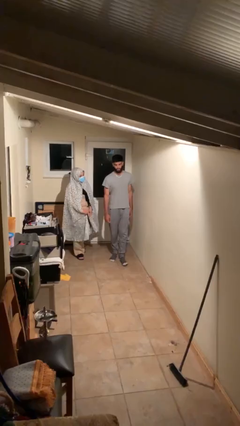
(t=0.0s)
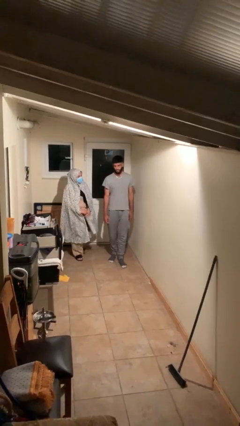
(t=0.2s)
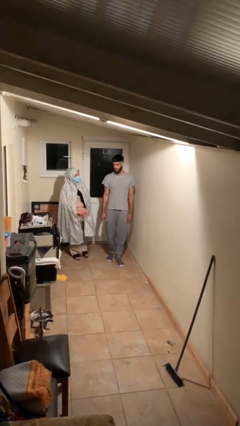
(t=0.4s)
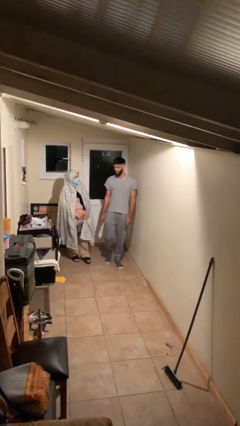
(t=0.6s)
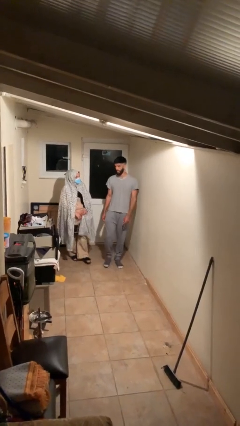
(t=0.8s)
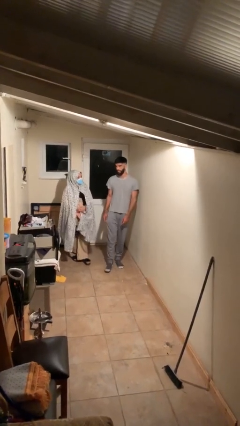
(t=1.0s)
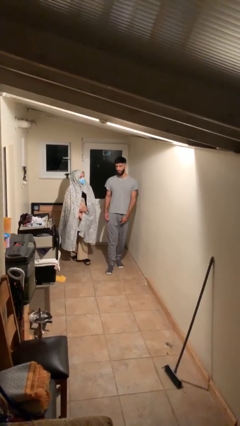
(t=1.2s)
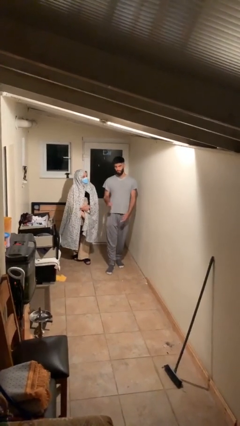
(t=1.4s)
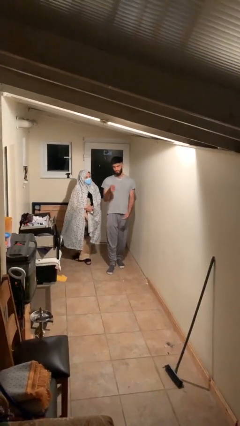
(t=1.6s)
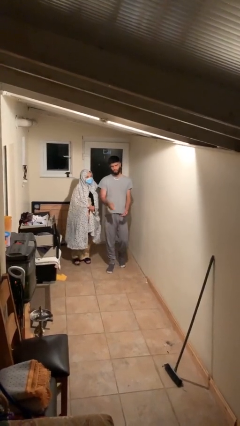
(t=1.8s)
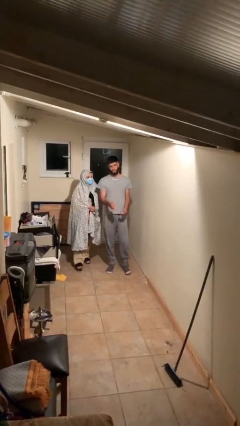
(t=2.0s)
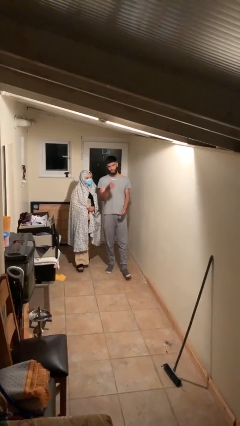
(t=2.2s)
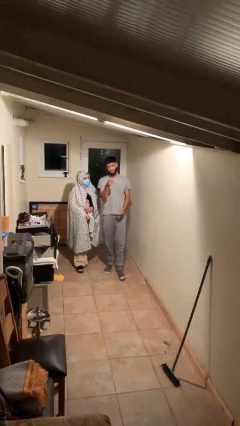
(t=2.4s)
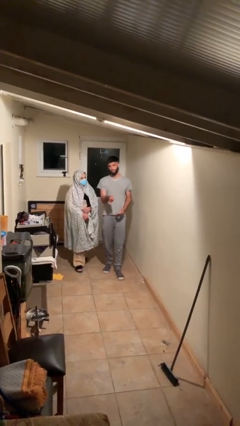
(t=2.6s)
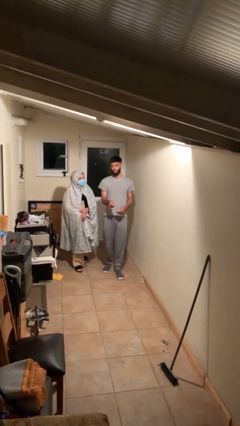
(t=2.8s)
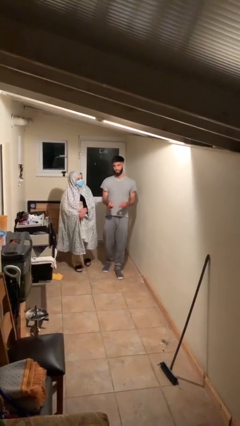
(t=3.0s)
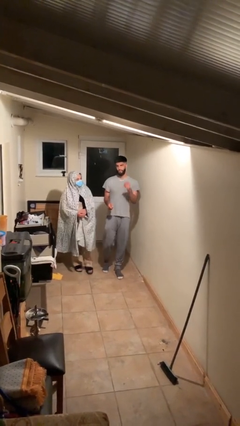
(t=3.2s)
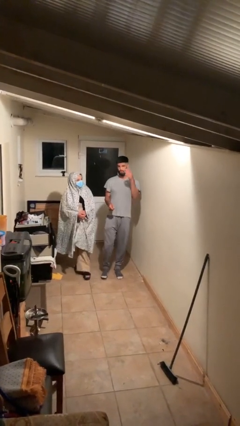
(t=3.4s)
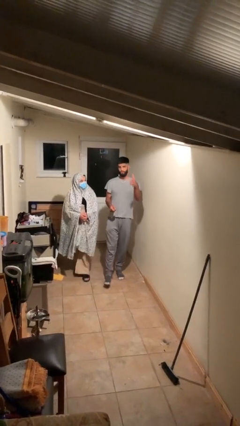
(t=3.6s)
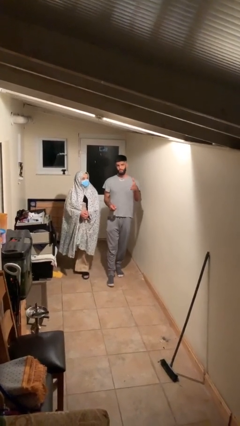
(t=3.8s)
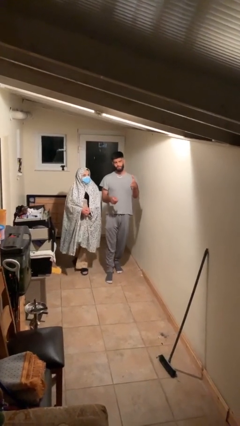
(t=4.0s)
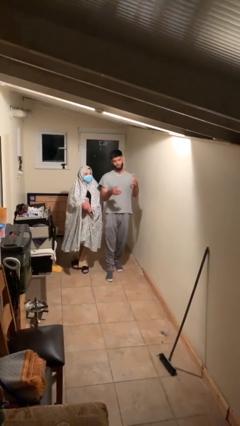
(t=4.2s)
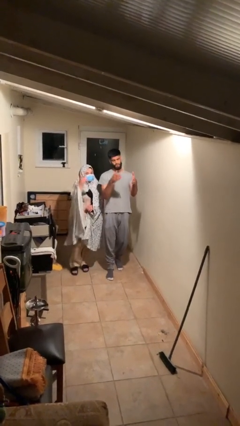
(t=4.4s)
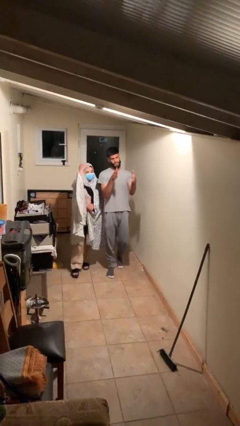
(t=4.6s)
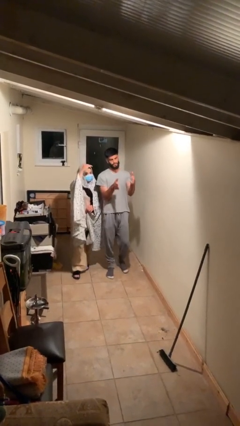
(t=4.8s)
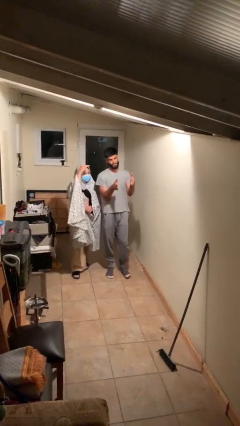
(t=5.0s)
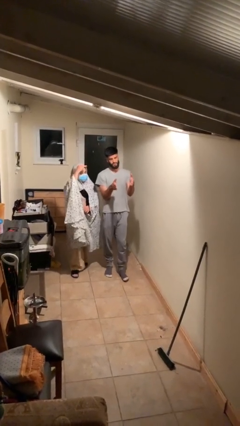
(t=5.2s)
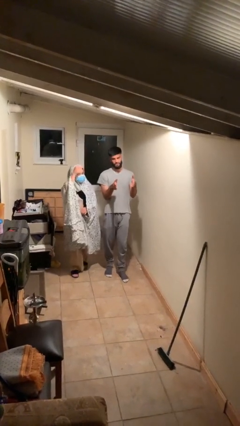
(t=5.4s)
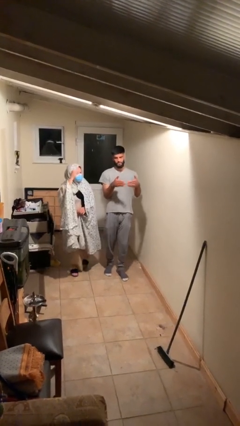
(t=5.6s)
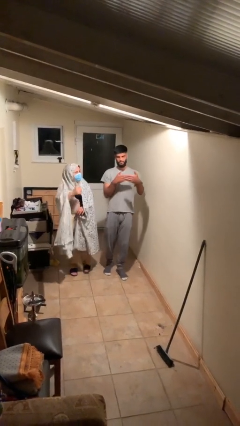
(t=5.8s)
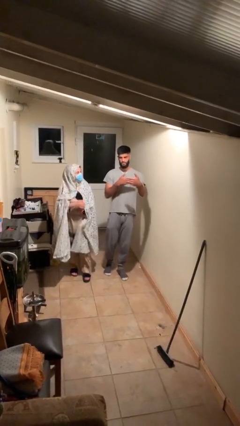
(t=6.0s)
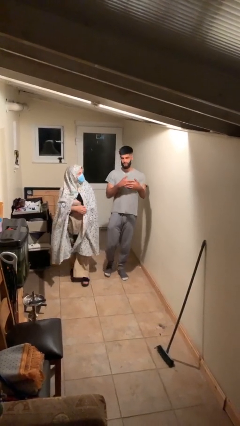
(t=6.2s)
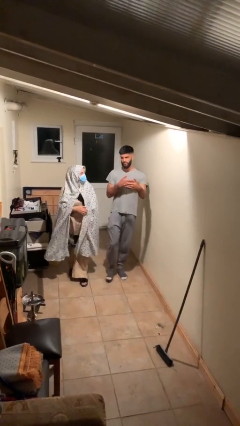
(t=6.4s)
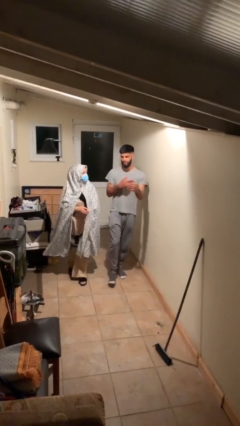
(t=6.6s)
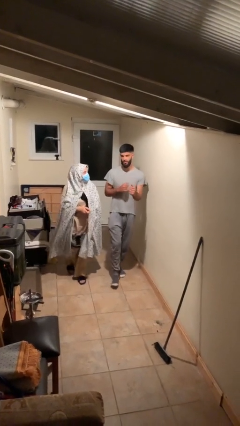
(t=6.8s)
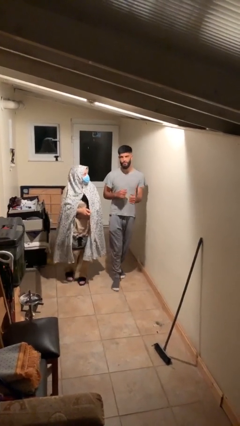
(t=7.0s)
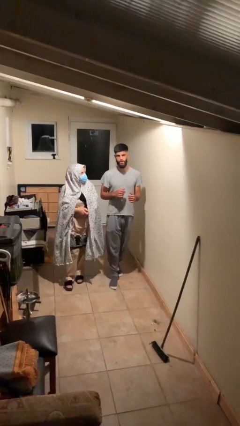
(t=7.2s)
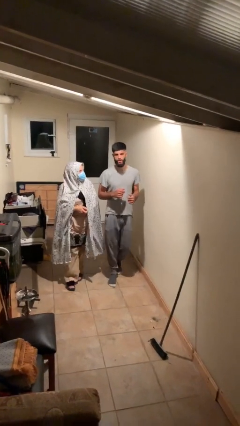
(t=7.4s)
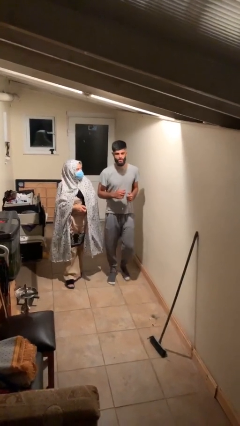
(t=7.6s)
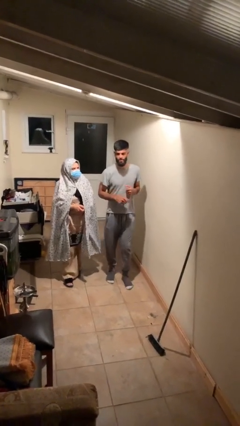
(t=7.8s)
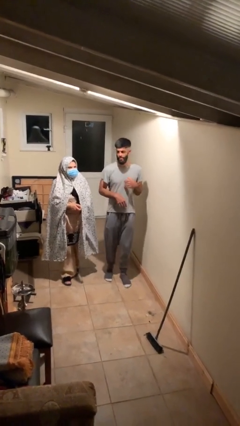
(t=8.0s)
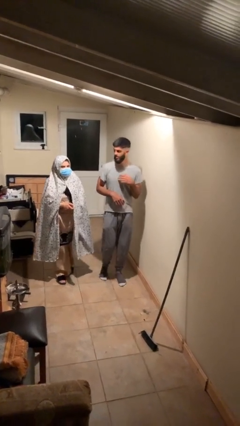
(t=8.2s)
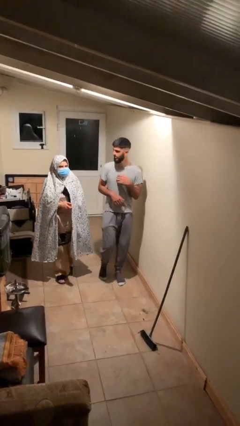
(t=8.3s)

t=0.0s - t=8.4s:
person talks to person

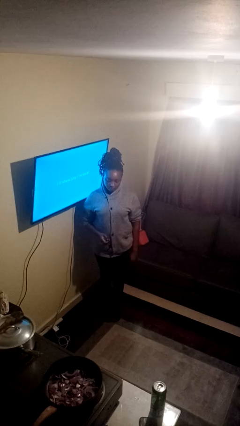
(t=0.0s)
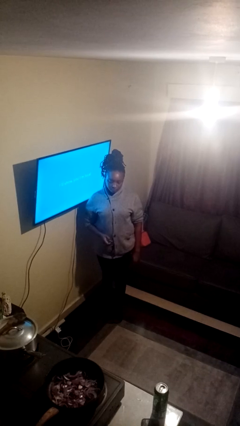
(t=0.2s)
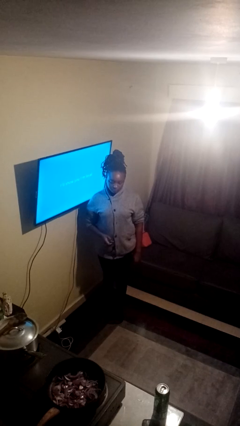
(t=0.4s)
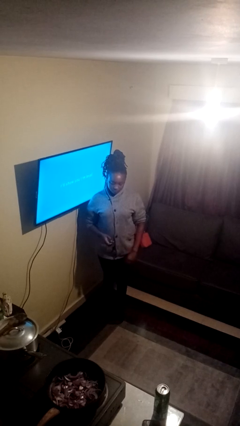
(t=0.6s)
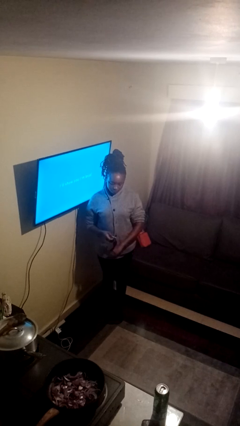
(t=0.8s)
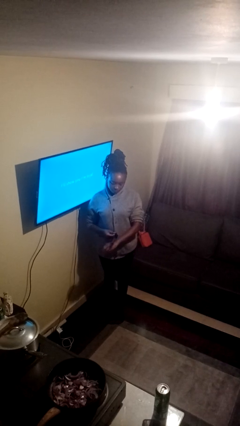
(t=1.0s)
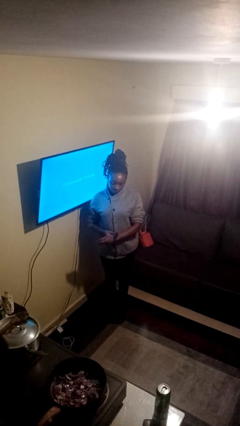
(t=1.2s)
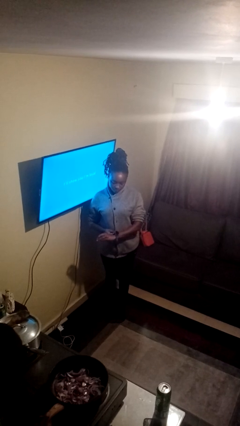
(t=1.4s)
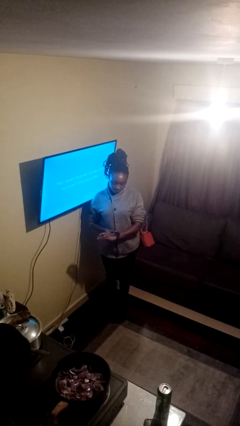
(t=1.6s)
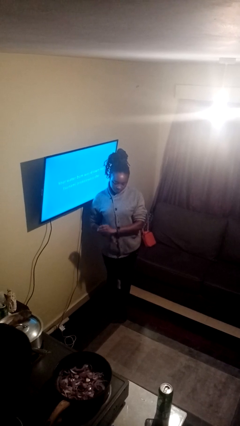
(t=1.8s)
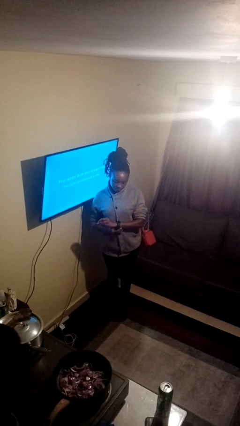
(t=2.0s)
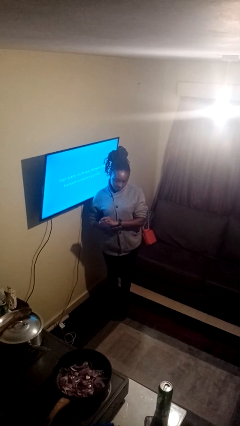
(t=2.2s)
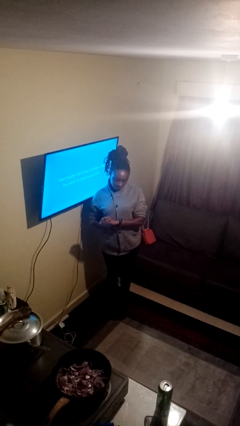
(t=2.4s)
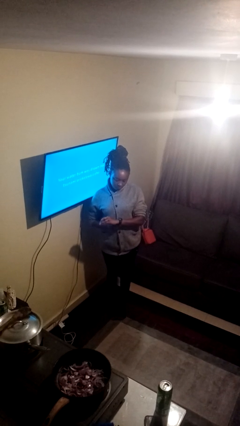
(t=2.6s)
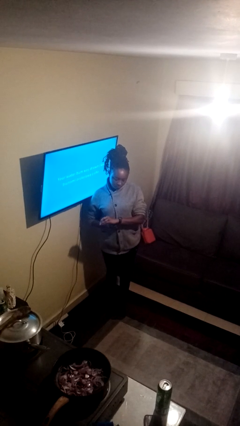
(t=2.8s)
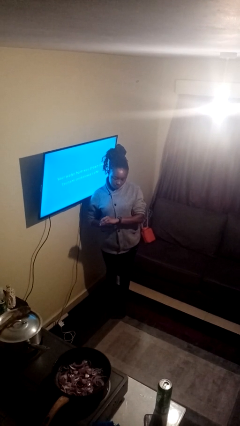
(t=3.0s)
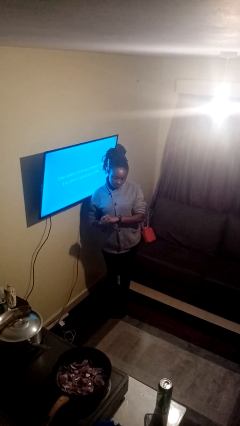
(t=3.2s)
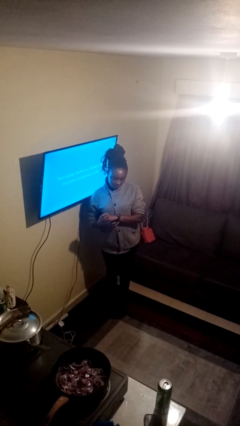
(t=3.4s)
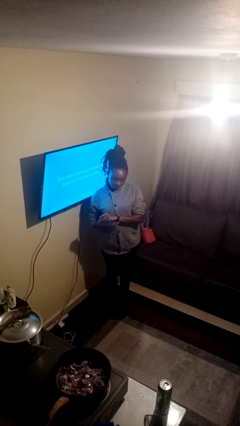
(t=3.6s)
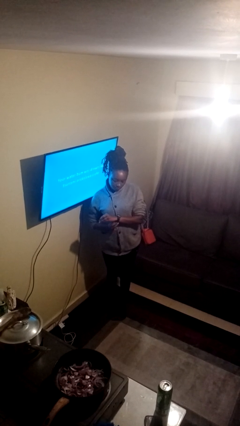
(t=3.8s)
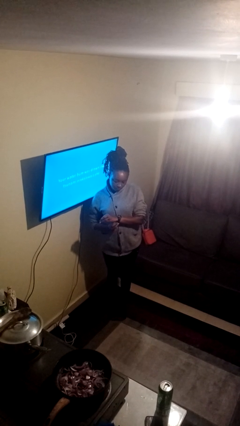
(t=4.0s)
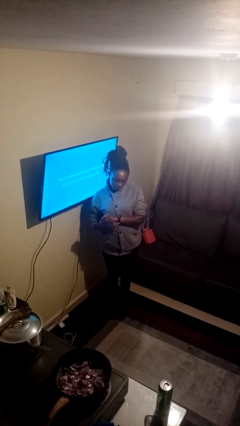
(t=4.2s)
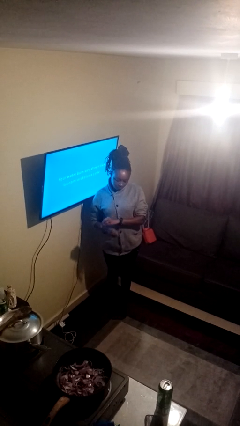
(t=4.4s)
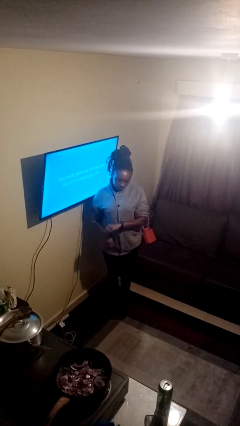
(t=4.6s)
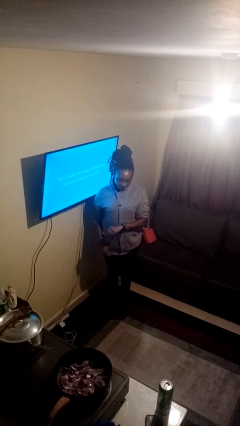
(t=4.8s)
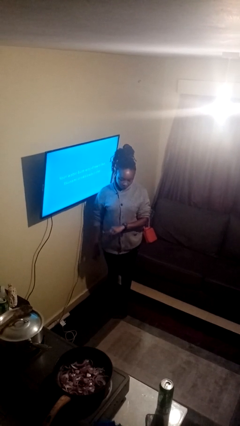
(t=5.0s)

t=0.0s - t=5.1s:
person puts on wristwatch

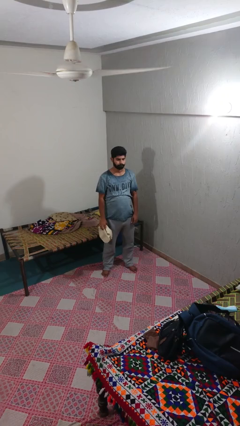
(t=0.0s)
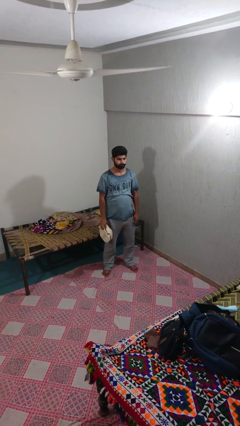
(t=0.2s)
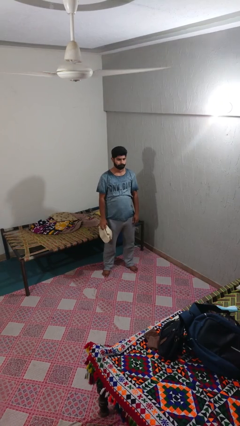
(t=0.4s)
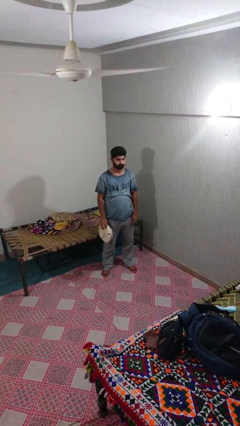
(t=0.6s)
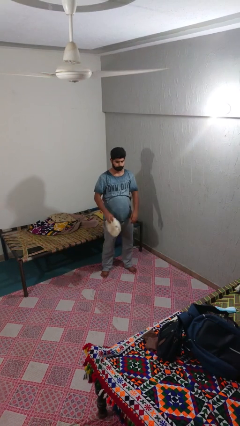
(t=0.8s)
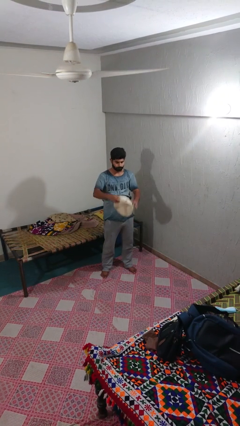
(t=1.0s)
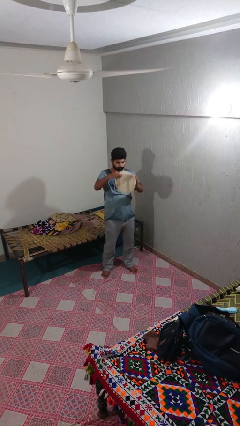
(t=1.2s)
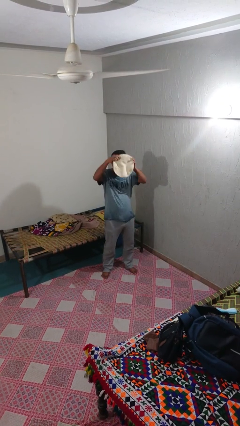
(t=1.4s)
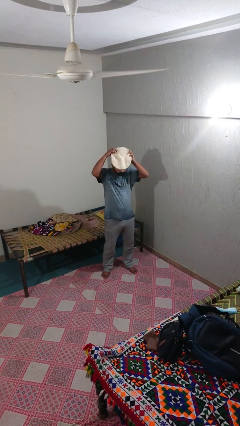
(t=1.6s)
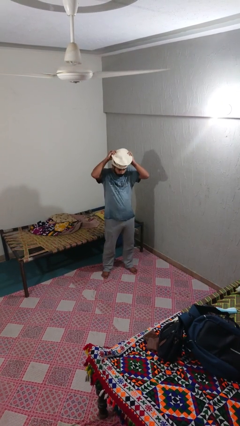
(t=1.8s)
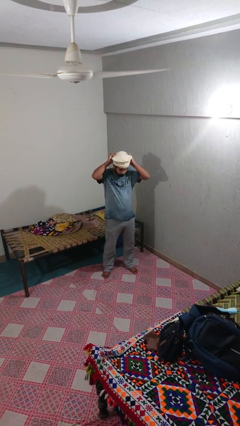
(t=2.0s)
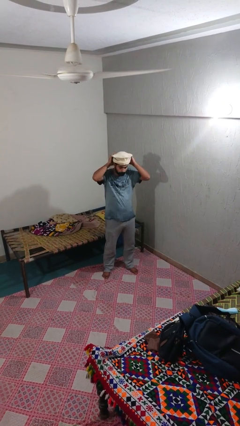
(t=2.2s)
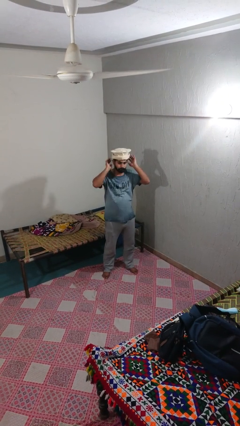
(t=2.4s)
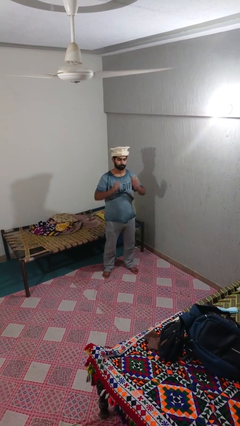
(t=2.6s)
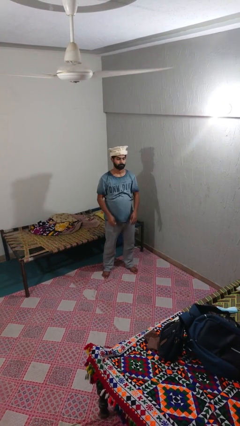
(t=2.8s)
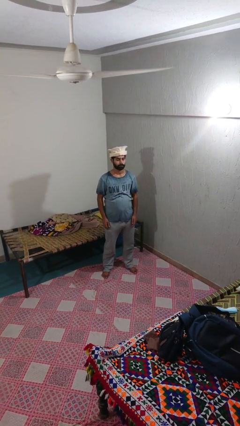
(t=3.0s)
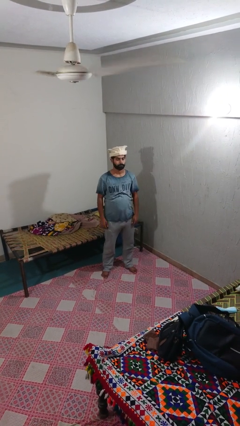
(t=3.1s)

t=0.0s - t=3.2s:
person puts on hat

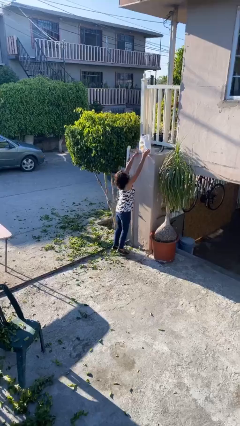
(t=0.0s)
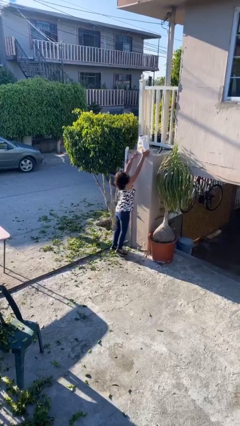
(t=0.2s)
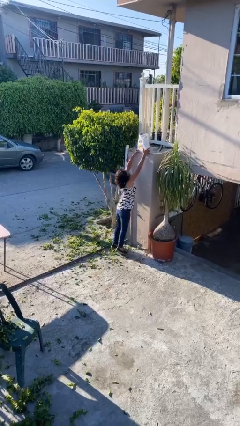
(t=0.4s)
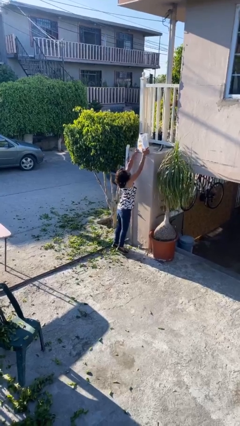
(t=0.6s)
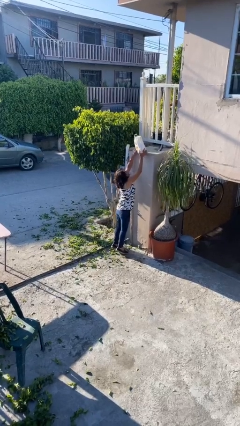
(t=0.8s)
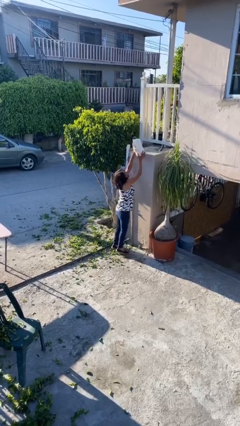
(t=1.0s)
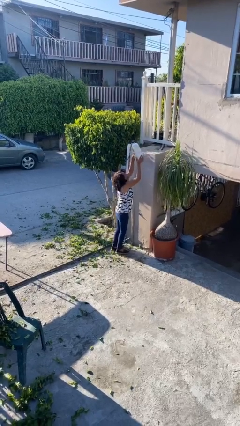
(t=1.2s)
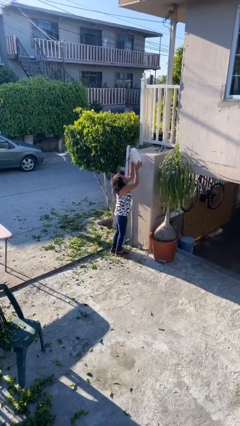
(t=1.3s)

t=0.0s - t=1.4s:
person picks up object from shelf
